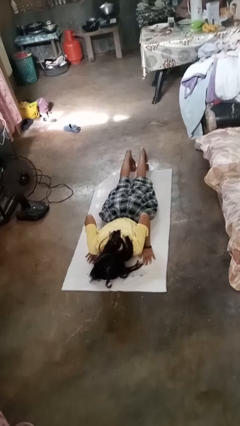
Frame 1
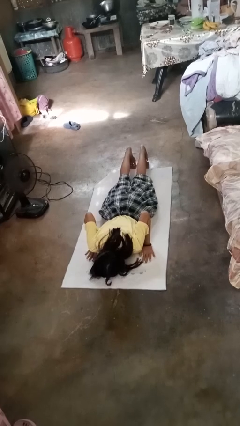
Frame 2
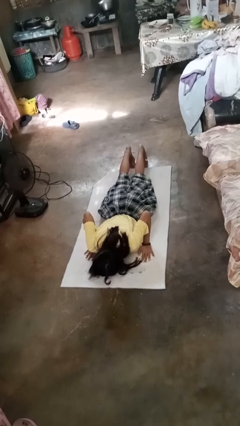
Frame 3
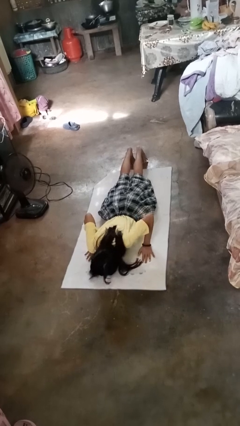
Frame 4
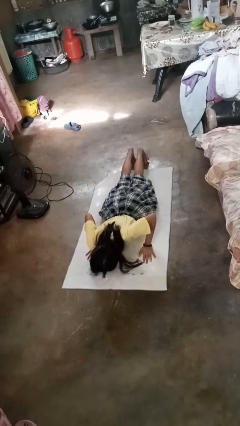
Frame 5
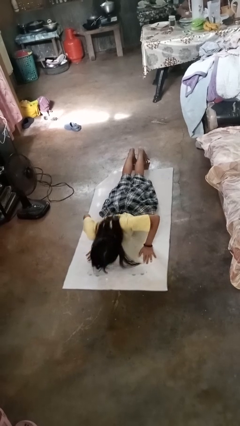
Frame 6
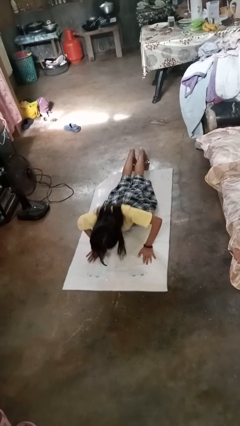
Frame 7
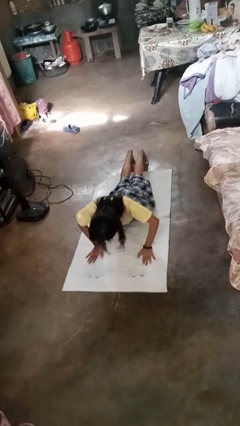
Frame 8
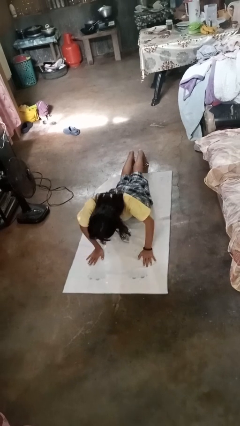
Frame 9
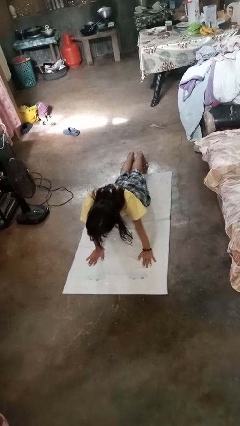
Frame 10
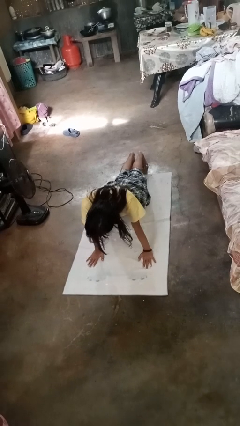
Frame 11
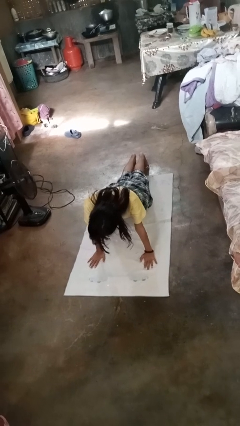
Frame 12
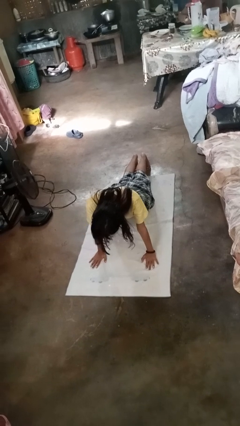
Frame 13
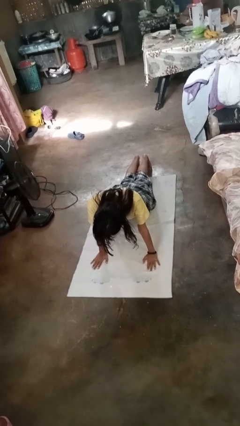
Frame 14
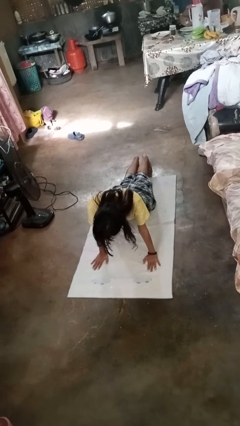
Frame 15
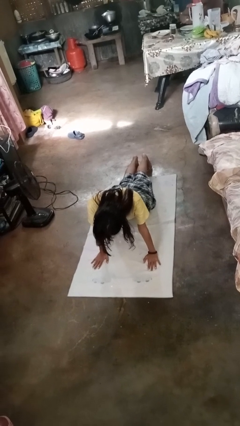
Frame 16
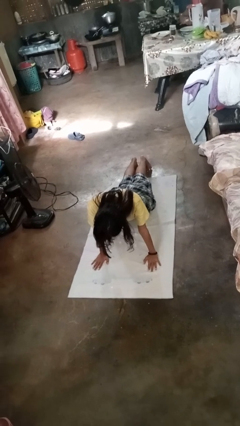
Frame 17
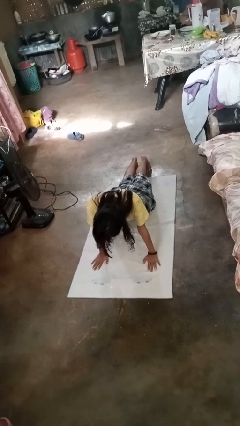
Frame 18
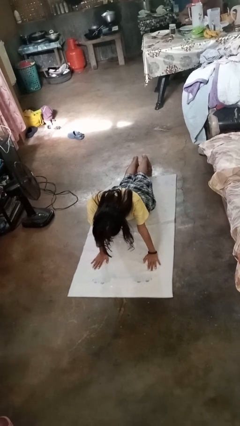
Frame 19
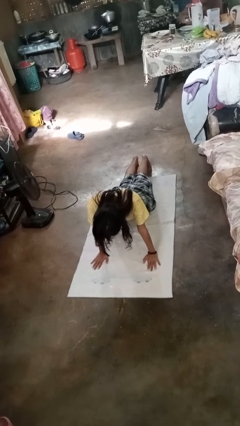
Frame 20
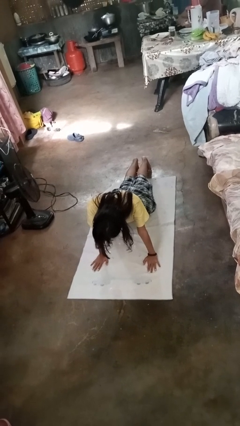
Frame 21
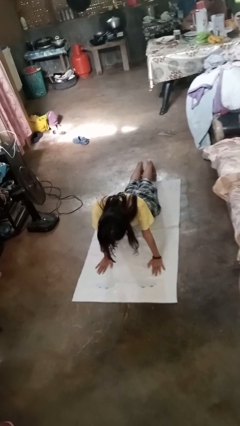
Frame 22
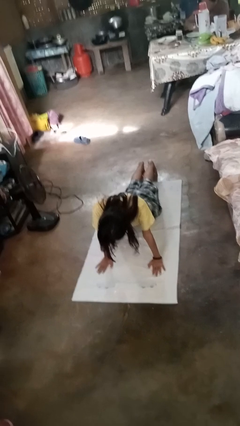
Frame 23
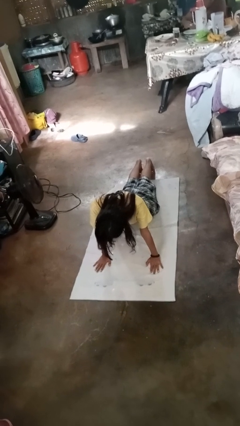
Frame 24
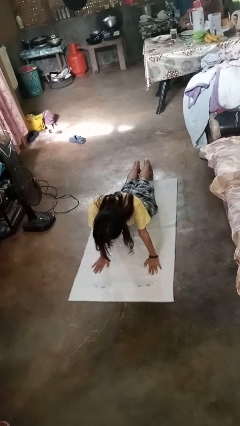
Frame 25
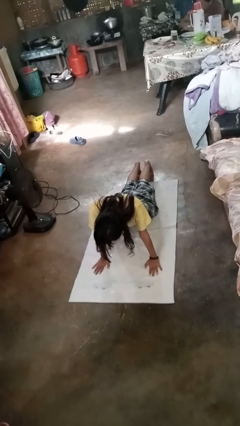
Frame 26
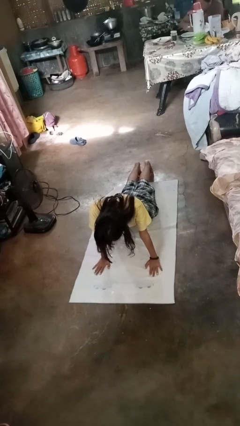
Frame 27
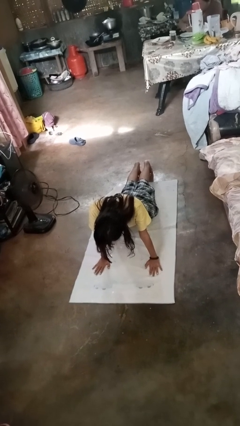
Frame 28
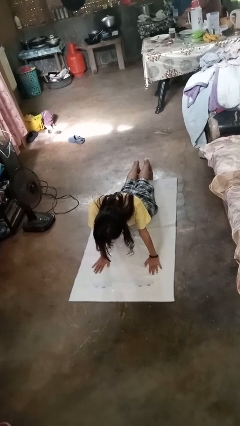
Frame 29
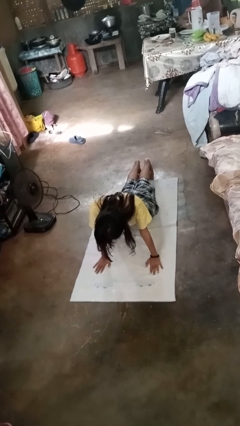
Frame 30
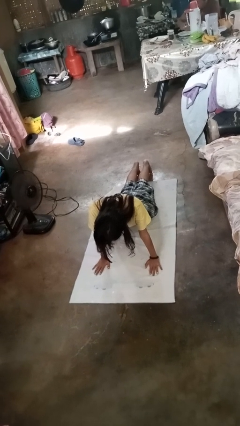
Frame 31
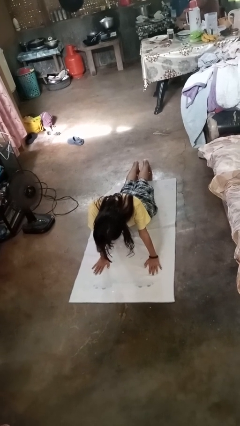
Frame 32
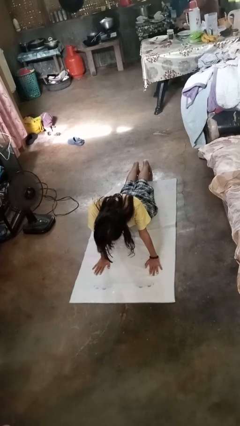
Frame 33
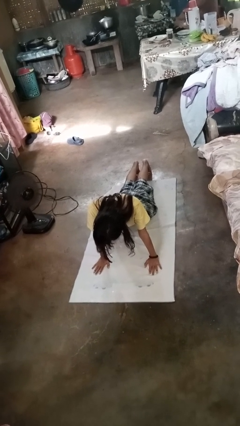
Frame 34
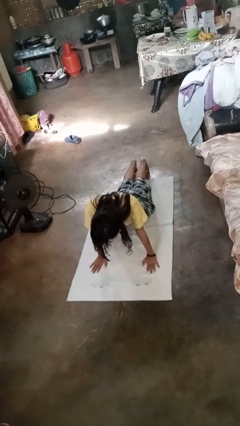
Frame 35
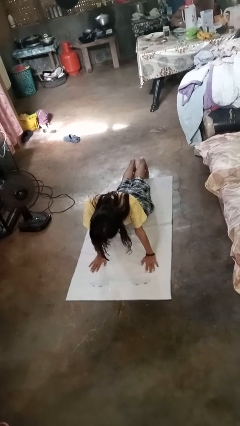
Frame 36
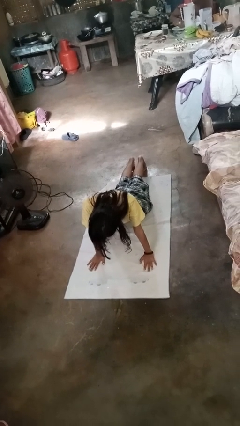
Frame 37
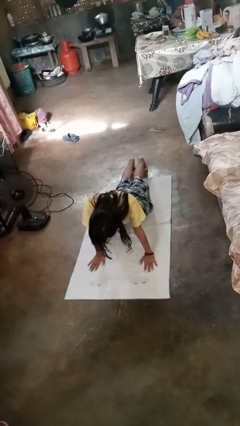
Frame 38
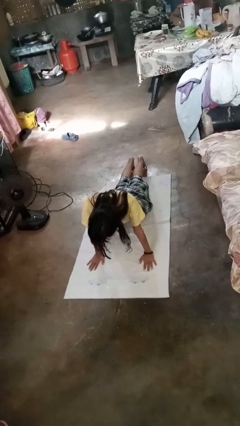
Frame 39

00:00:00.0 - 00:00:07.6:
person exercises with pushup

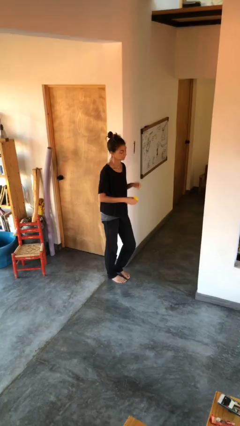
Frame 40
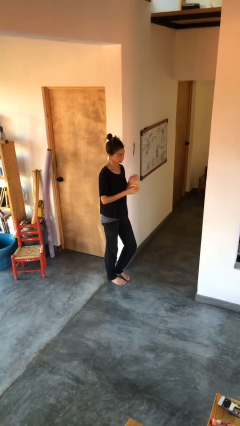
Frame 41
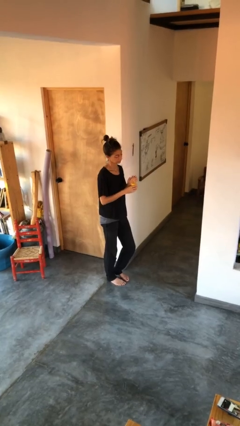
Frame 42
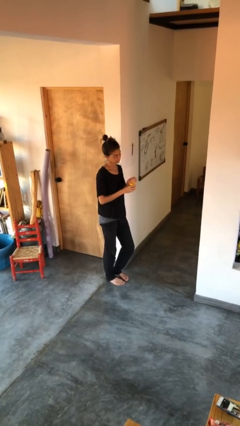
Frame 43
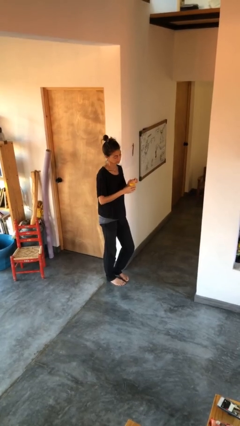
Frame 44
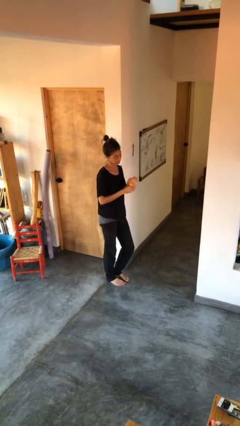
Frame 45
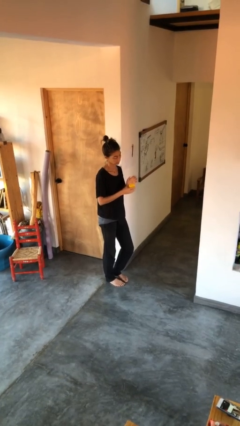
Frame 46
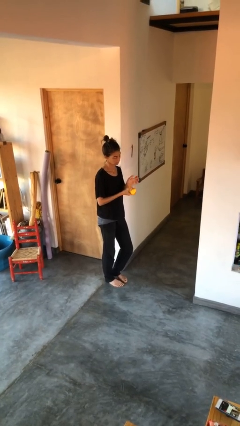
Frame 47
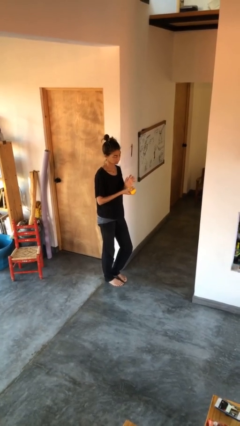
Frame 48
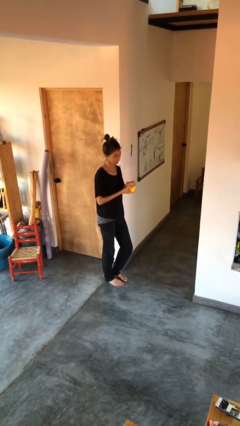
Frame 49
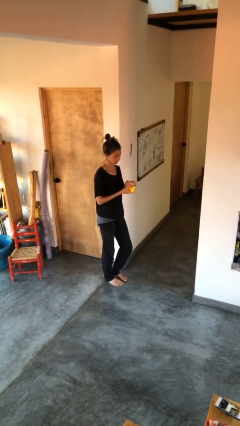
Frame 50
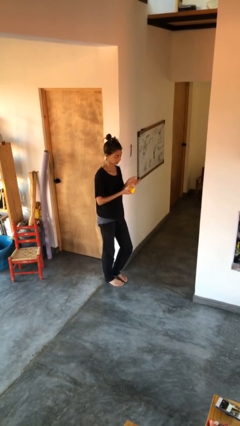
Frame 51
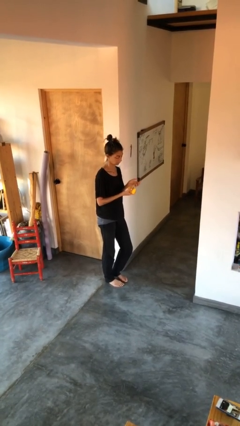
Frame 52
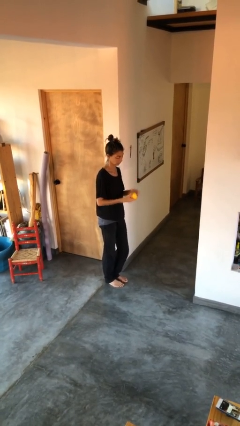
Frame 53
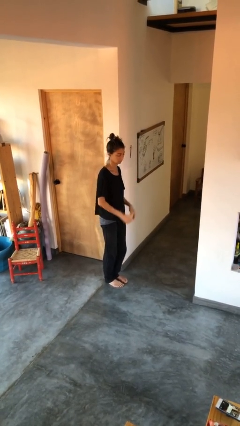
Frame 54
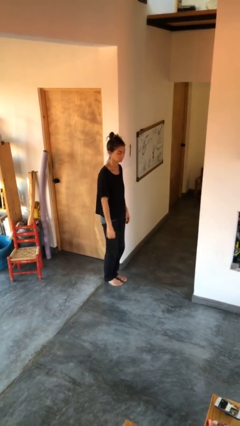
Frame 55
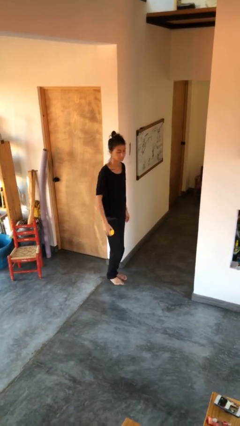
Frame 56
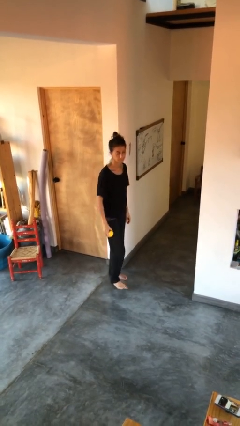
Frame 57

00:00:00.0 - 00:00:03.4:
person taps object with finger

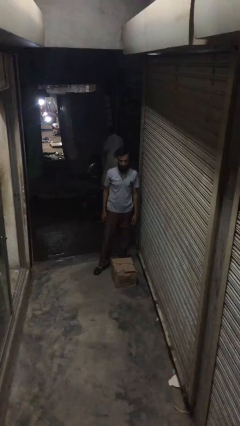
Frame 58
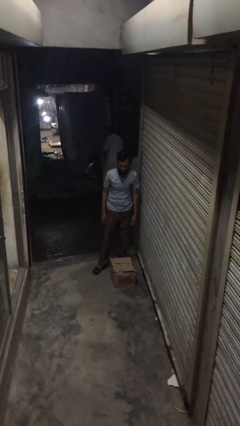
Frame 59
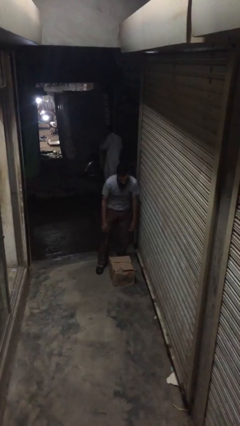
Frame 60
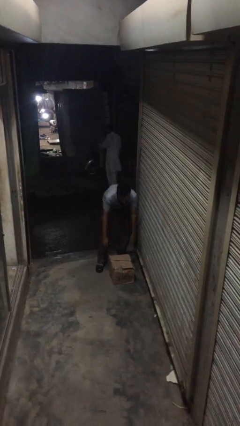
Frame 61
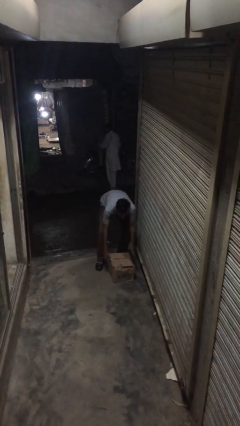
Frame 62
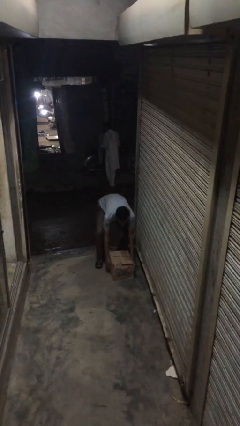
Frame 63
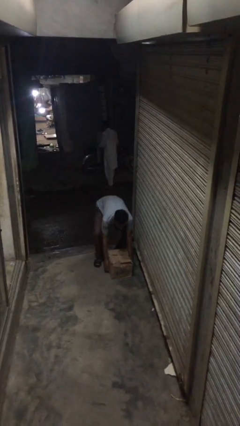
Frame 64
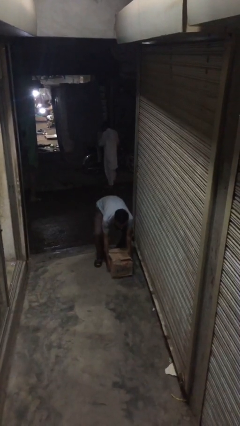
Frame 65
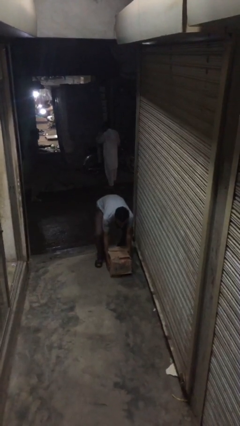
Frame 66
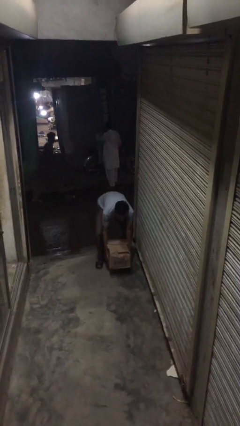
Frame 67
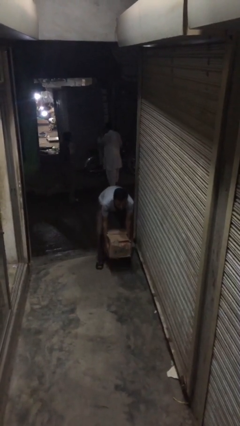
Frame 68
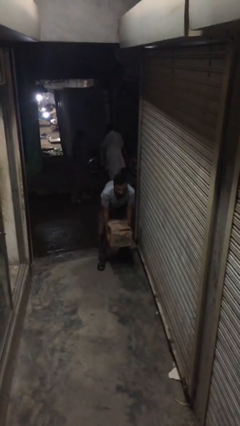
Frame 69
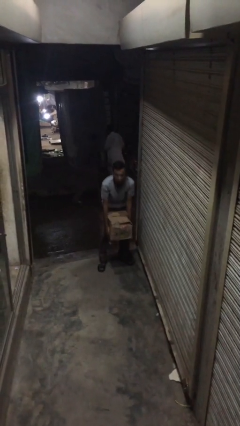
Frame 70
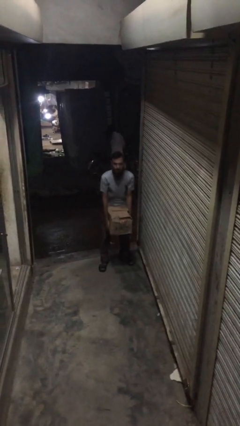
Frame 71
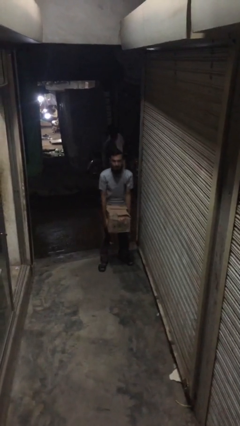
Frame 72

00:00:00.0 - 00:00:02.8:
person picks up object from floor

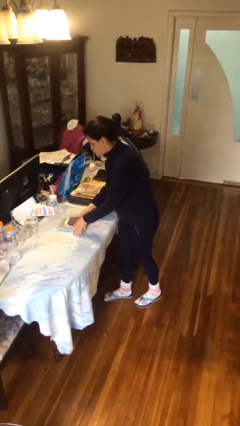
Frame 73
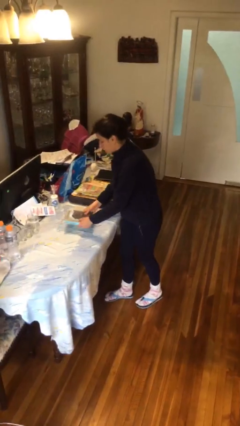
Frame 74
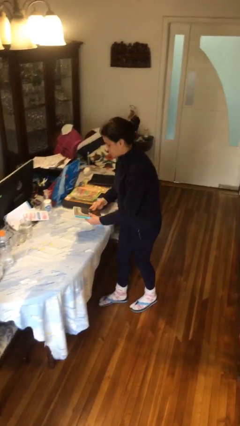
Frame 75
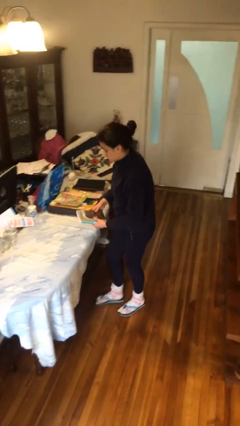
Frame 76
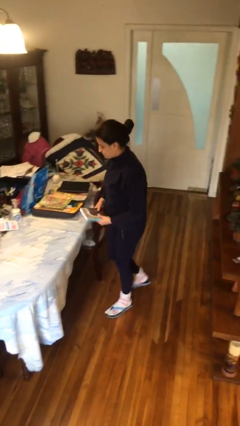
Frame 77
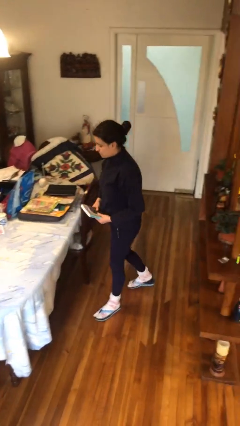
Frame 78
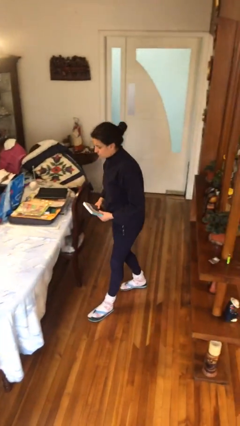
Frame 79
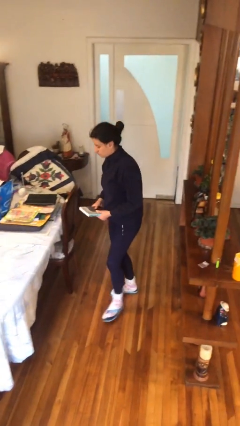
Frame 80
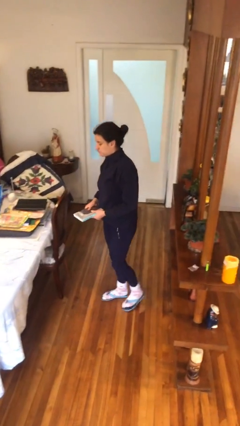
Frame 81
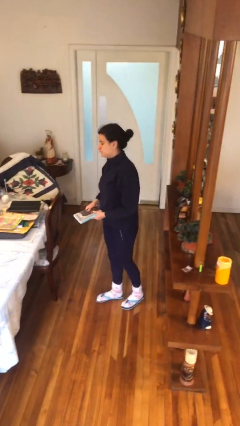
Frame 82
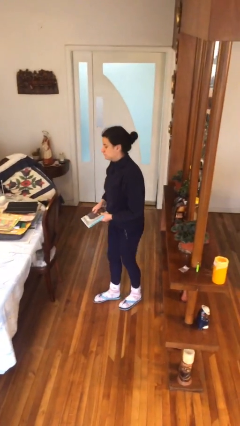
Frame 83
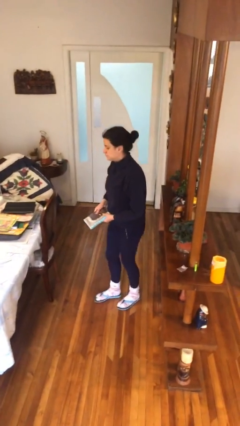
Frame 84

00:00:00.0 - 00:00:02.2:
person picks up object from table

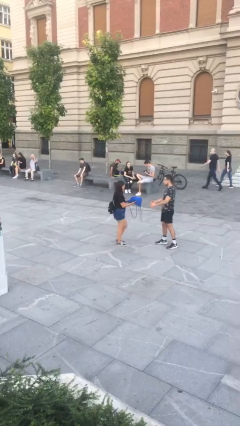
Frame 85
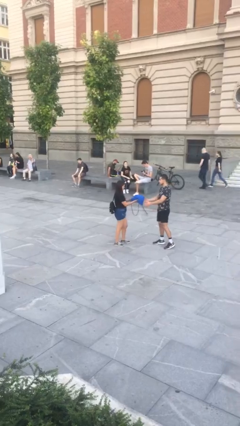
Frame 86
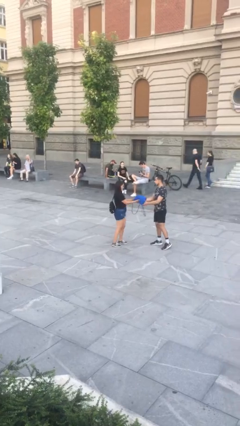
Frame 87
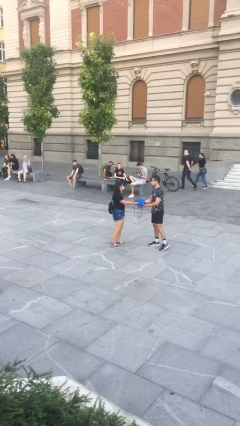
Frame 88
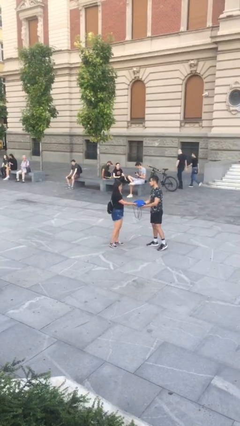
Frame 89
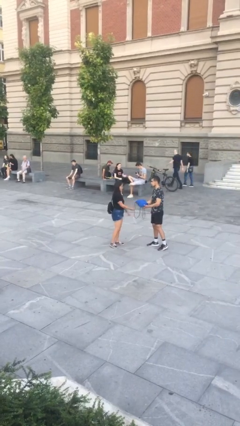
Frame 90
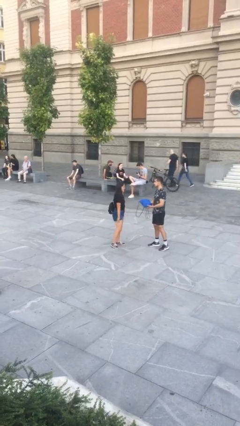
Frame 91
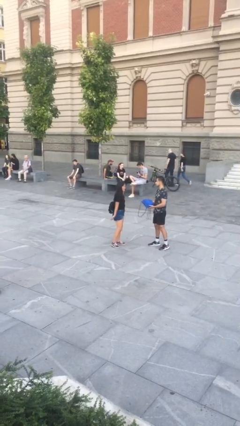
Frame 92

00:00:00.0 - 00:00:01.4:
person transfers object to person

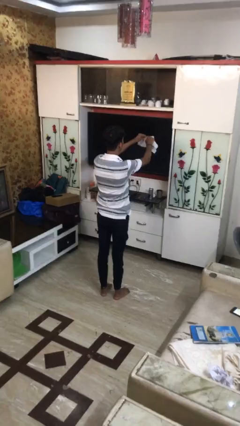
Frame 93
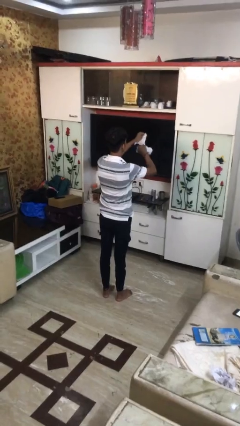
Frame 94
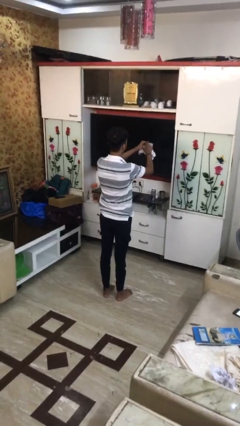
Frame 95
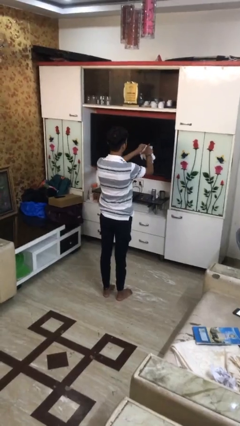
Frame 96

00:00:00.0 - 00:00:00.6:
person tears paper
